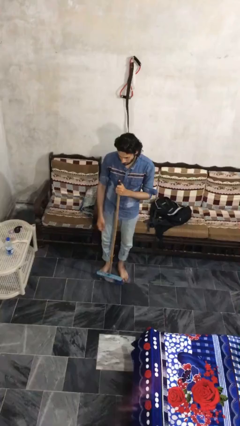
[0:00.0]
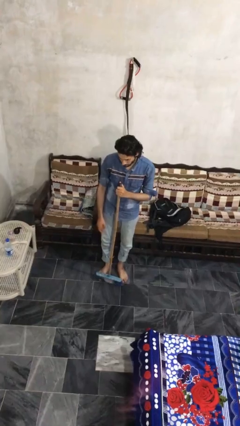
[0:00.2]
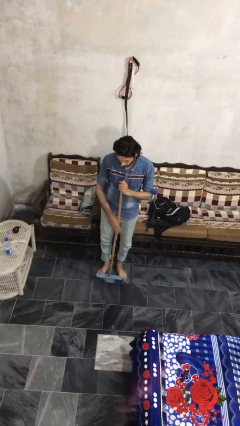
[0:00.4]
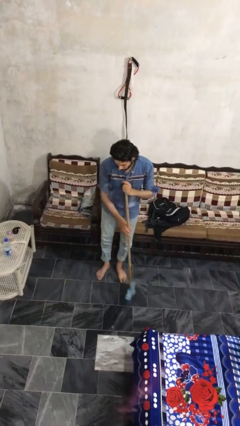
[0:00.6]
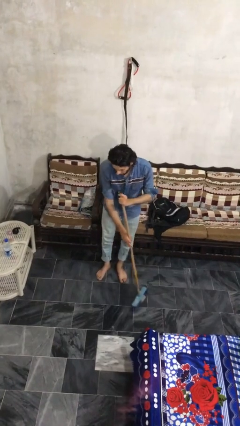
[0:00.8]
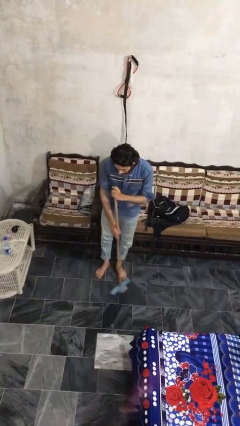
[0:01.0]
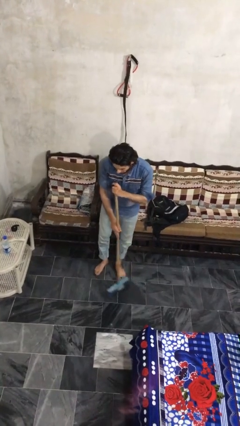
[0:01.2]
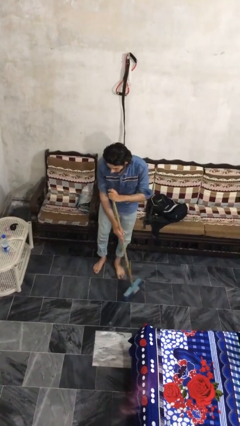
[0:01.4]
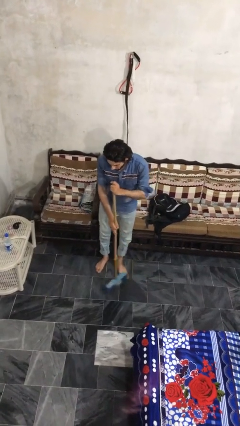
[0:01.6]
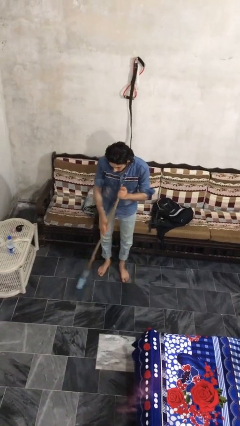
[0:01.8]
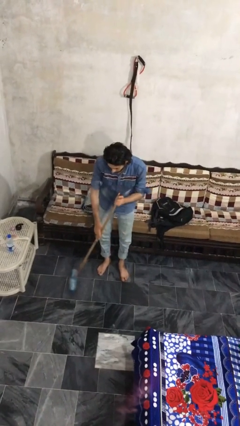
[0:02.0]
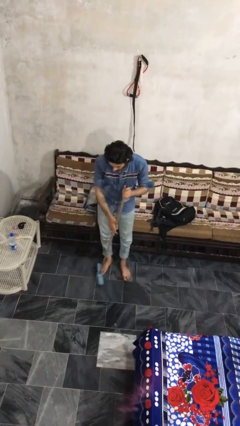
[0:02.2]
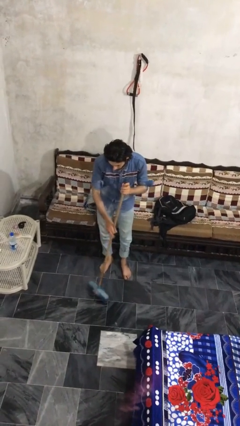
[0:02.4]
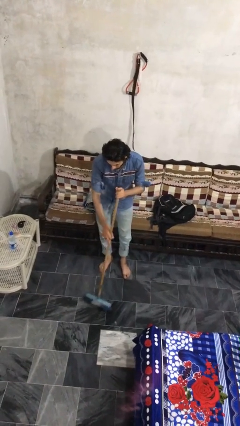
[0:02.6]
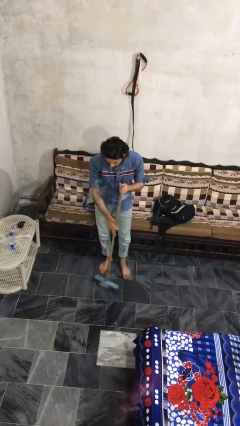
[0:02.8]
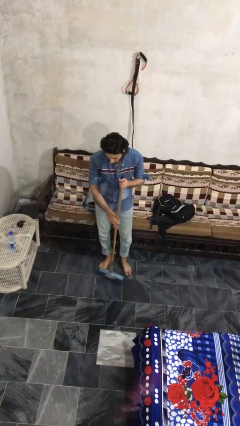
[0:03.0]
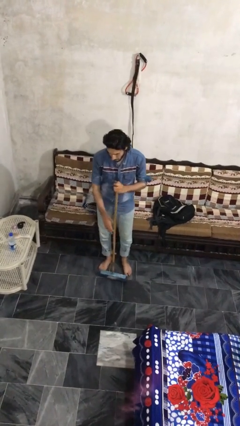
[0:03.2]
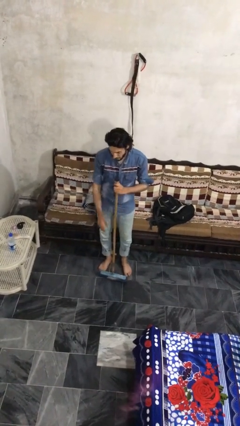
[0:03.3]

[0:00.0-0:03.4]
person sweeps floor

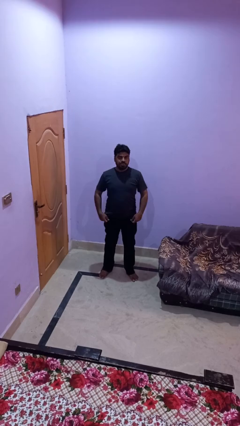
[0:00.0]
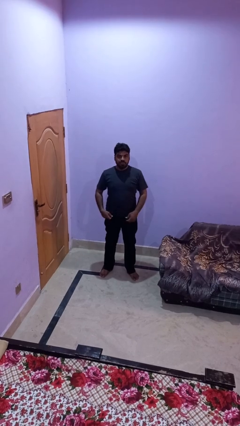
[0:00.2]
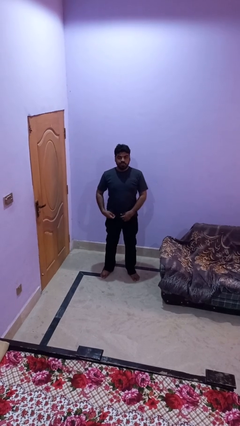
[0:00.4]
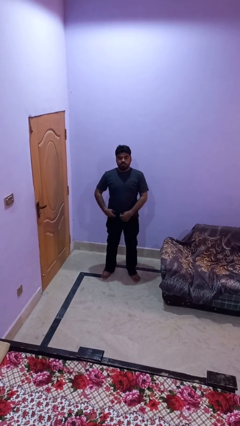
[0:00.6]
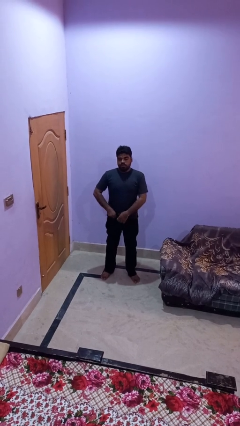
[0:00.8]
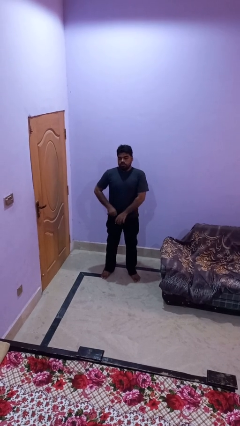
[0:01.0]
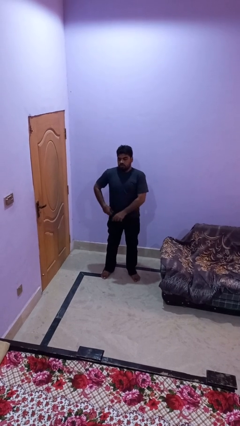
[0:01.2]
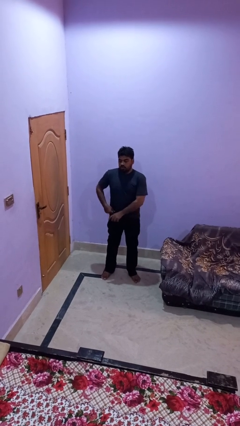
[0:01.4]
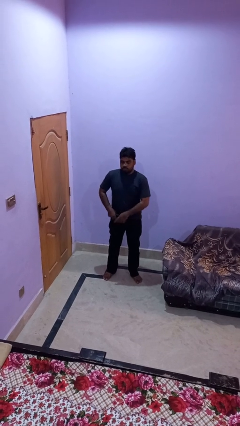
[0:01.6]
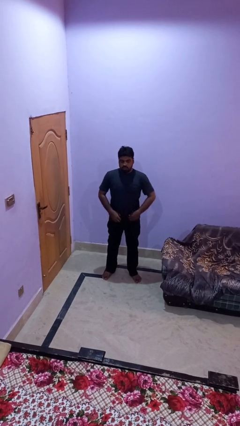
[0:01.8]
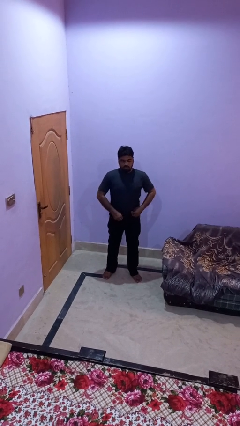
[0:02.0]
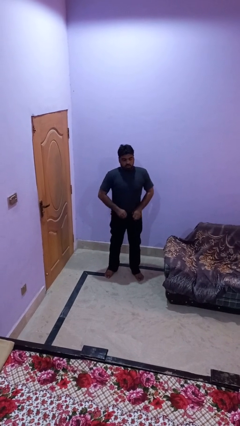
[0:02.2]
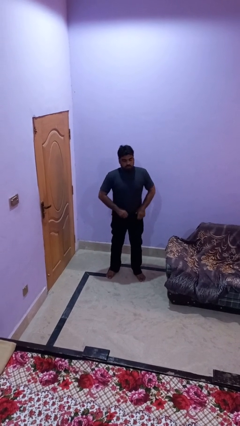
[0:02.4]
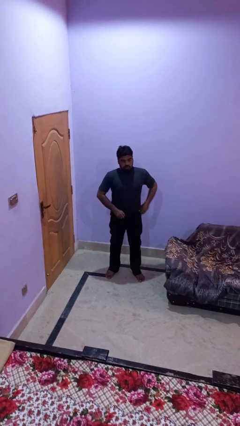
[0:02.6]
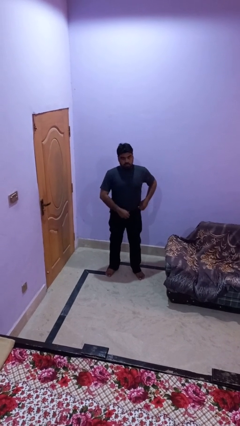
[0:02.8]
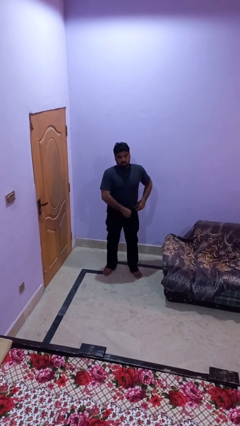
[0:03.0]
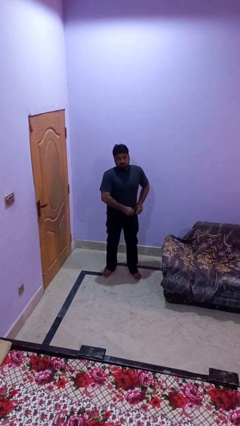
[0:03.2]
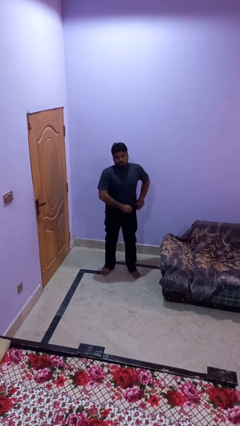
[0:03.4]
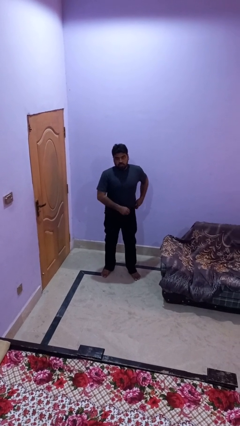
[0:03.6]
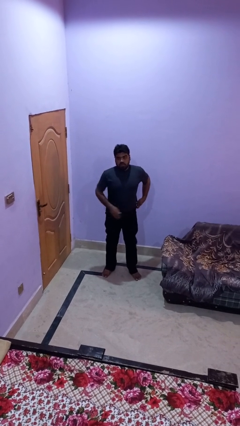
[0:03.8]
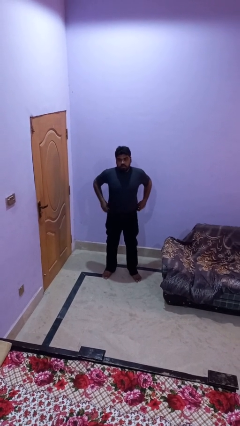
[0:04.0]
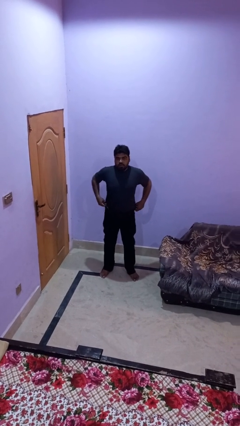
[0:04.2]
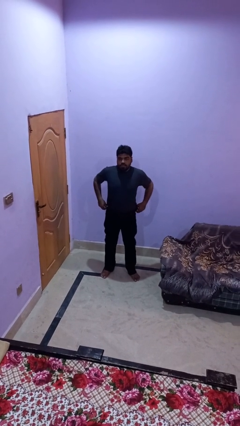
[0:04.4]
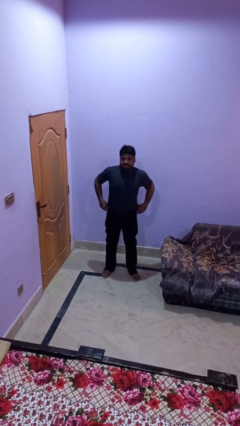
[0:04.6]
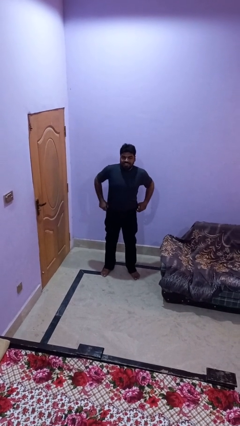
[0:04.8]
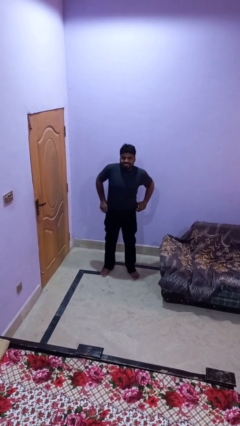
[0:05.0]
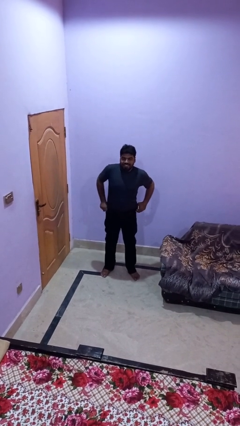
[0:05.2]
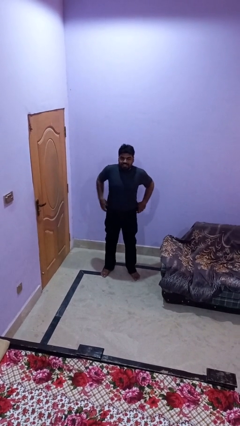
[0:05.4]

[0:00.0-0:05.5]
person tucks in shirt

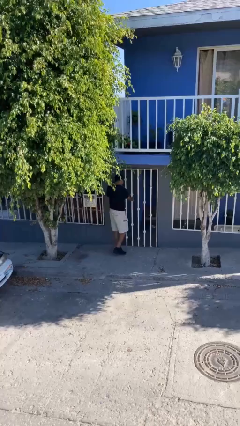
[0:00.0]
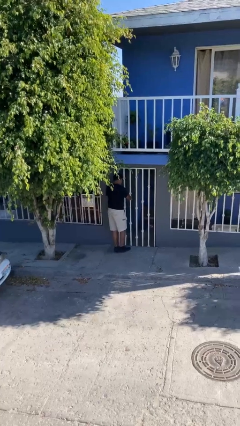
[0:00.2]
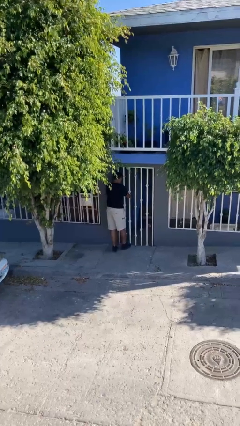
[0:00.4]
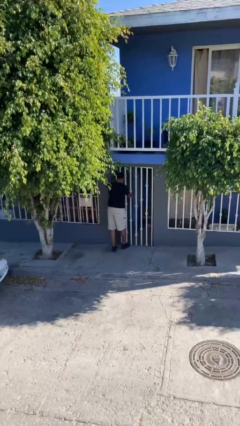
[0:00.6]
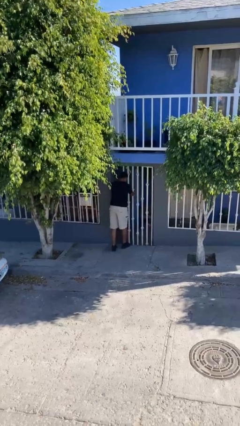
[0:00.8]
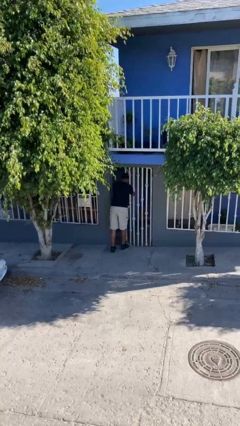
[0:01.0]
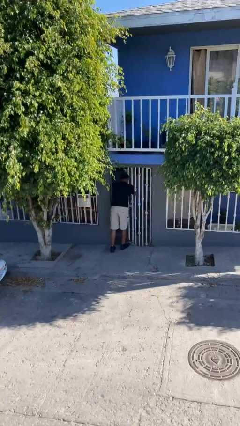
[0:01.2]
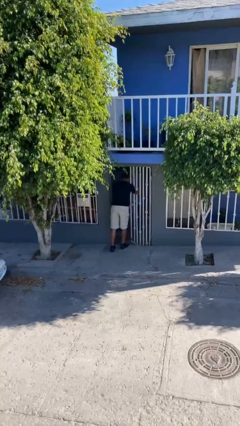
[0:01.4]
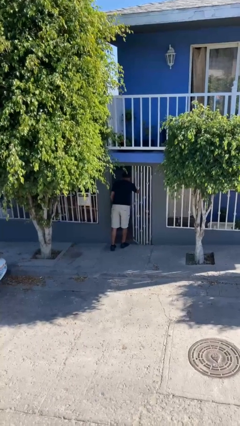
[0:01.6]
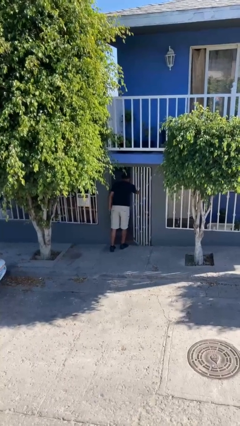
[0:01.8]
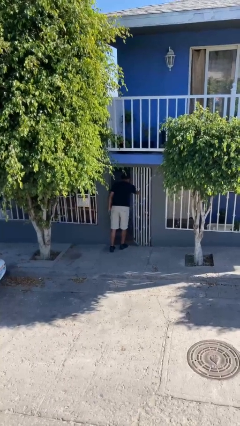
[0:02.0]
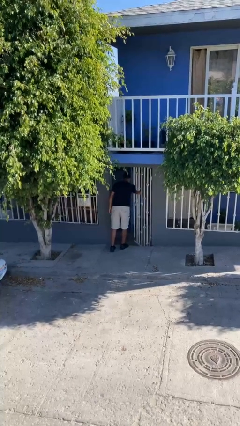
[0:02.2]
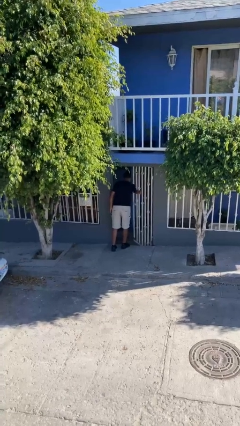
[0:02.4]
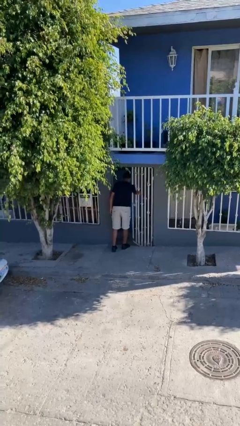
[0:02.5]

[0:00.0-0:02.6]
person opens facility door

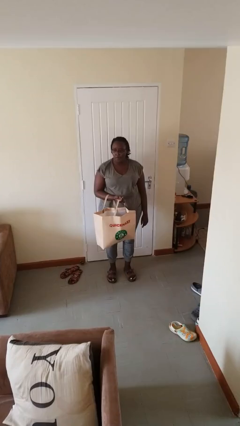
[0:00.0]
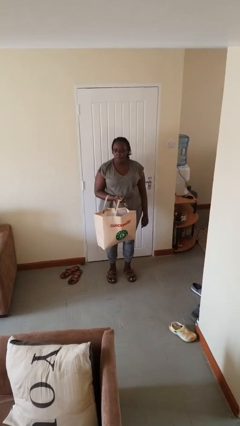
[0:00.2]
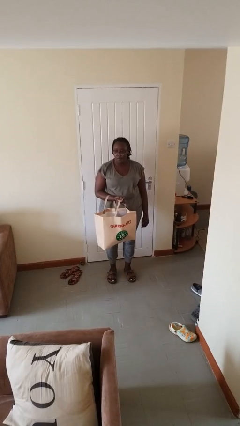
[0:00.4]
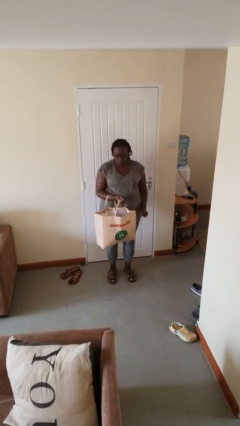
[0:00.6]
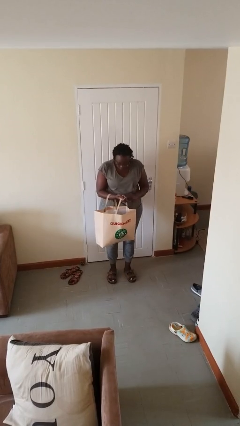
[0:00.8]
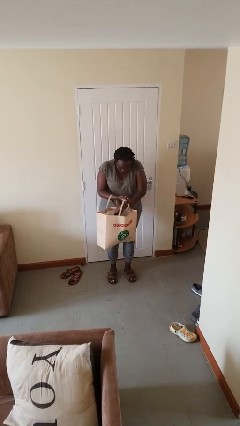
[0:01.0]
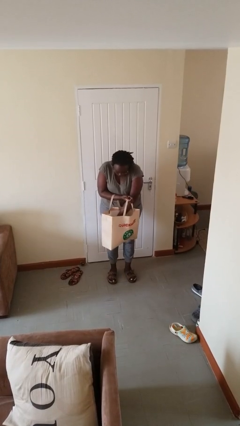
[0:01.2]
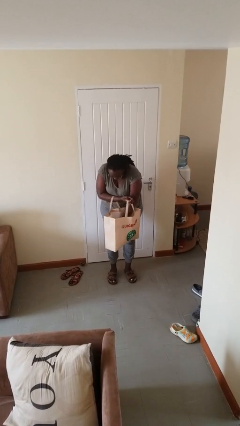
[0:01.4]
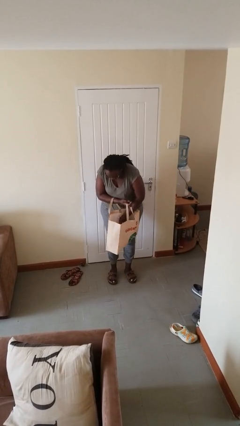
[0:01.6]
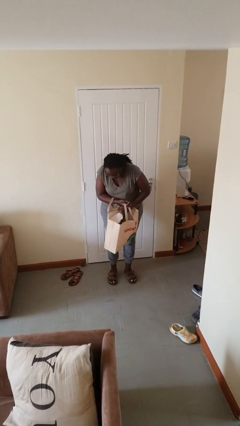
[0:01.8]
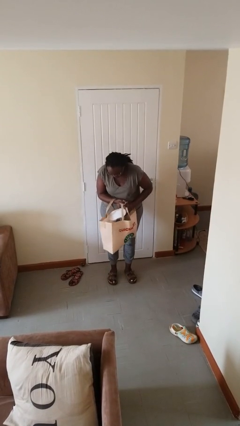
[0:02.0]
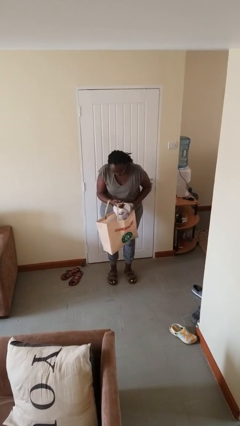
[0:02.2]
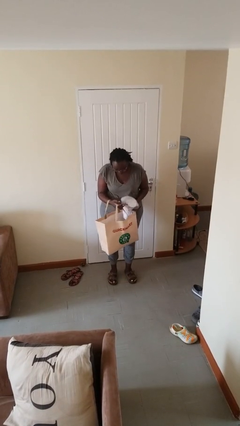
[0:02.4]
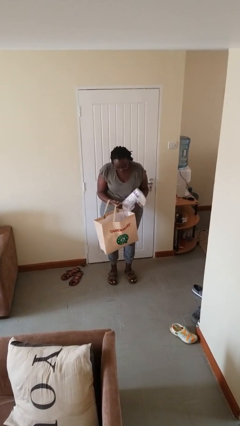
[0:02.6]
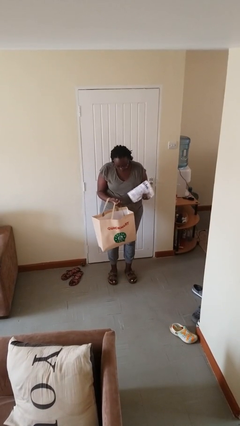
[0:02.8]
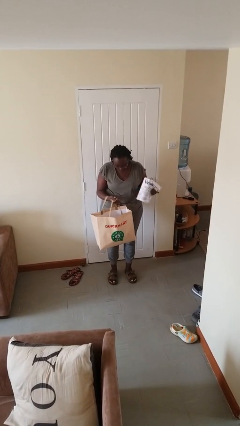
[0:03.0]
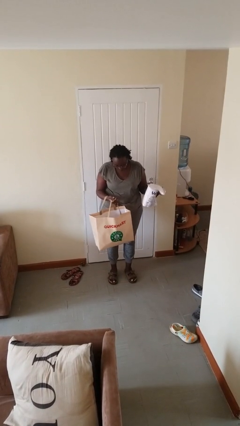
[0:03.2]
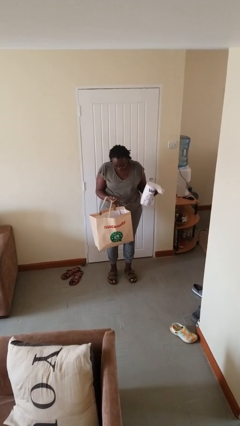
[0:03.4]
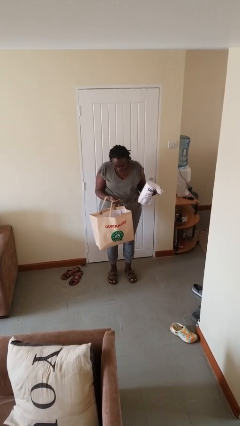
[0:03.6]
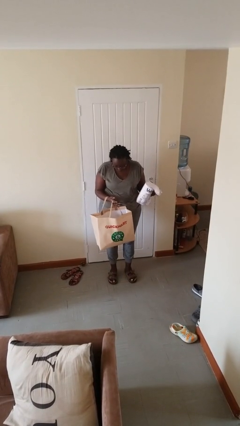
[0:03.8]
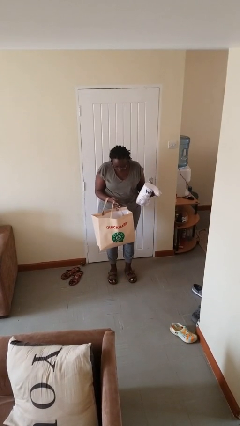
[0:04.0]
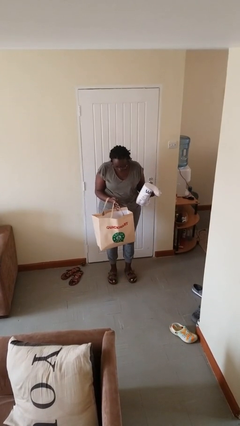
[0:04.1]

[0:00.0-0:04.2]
person takes object from bag

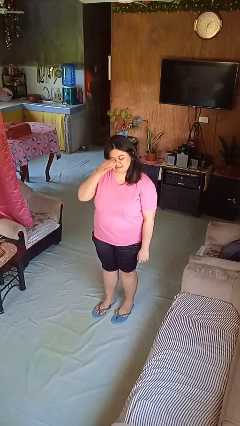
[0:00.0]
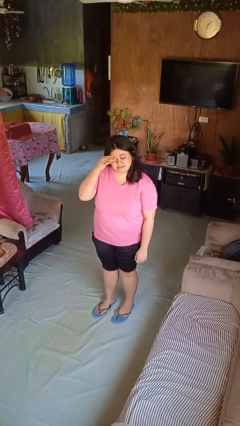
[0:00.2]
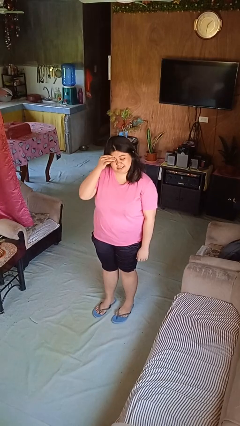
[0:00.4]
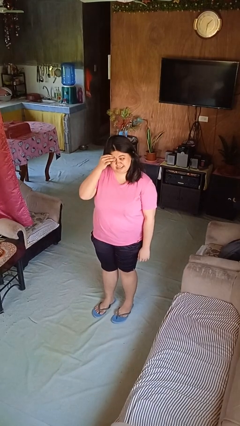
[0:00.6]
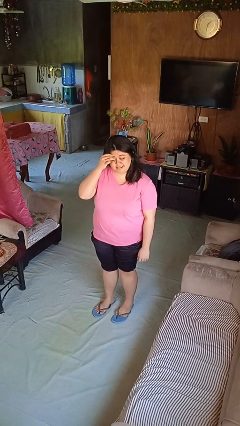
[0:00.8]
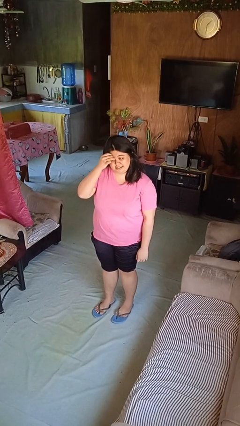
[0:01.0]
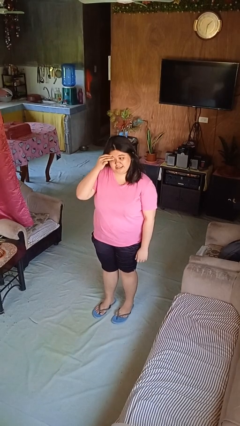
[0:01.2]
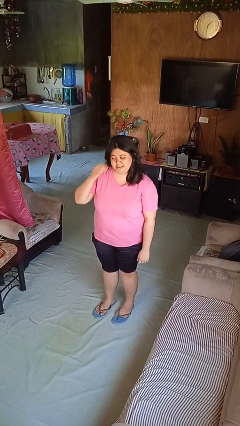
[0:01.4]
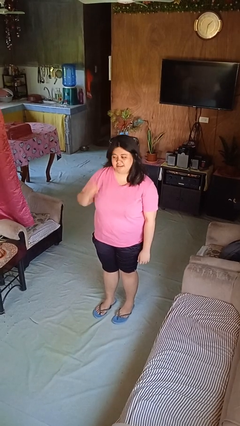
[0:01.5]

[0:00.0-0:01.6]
person scratches face

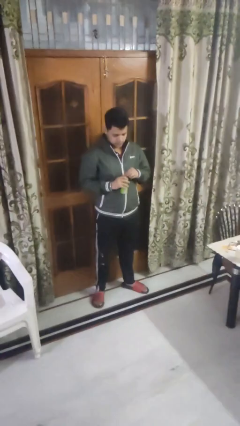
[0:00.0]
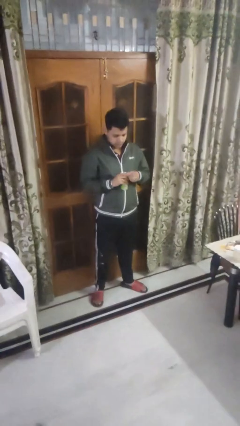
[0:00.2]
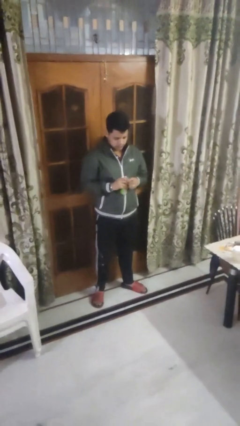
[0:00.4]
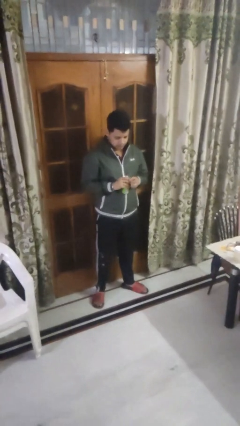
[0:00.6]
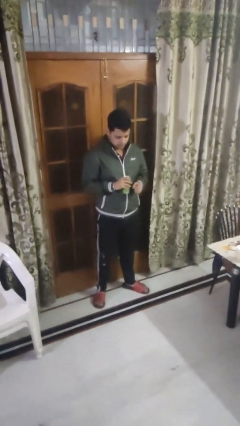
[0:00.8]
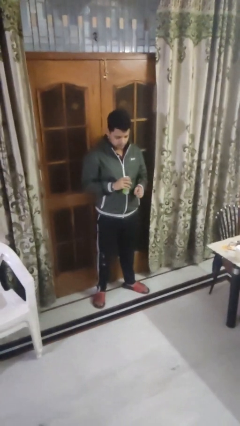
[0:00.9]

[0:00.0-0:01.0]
person opens beverage can
